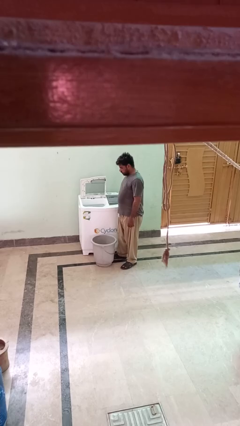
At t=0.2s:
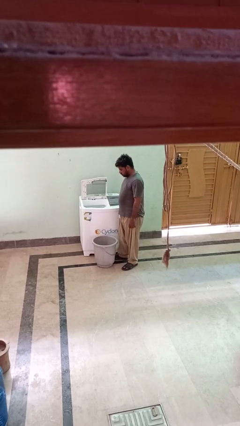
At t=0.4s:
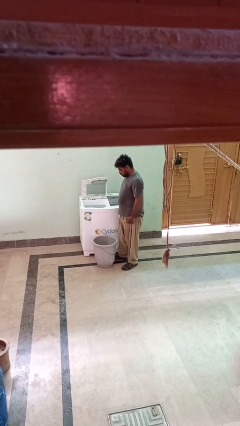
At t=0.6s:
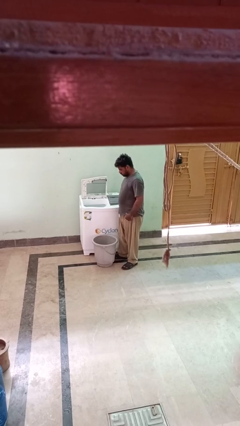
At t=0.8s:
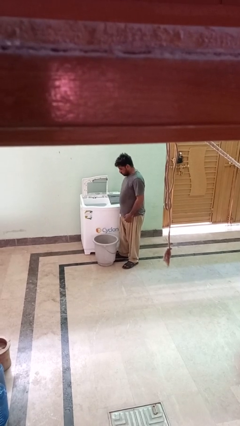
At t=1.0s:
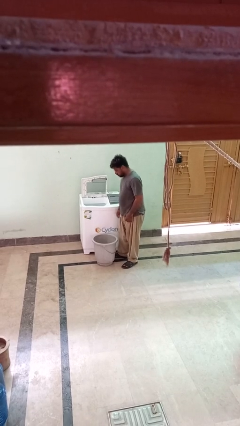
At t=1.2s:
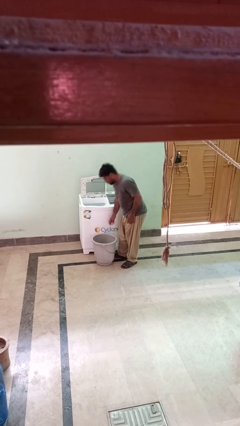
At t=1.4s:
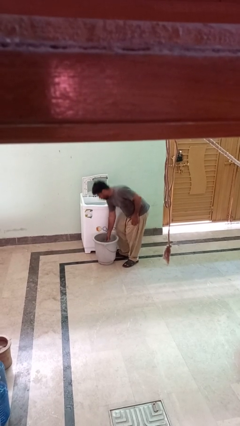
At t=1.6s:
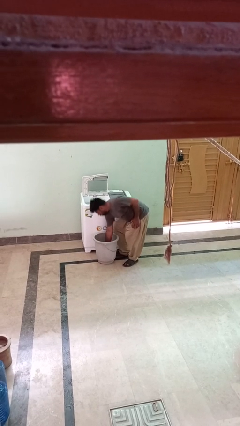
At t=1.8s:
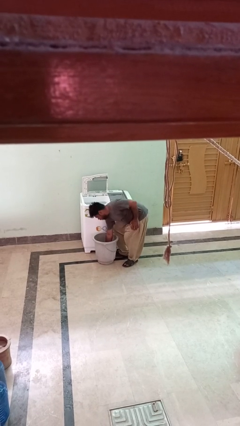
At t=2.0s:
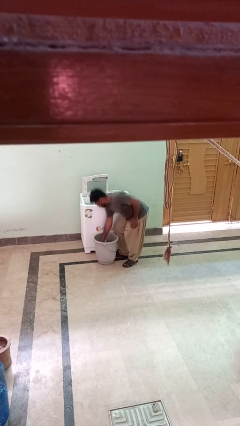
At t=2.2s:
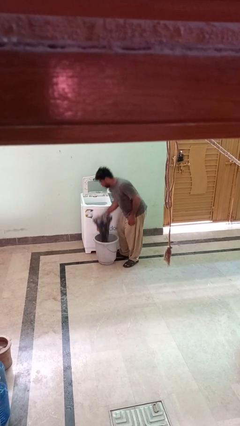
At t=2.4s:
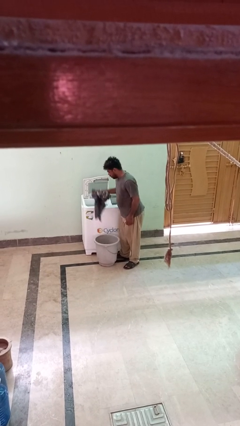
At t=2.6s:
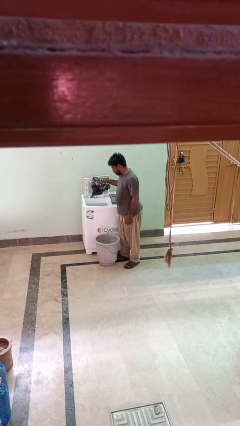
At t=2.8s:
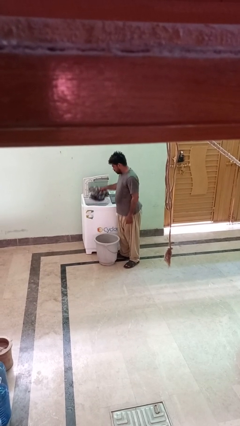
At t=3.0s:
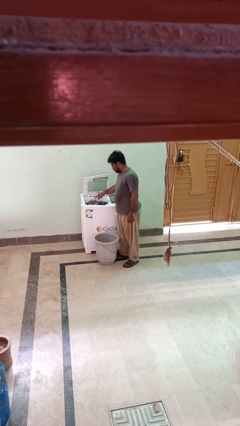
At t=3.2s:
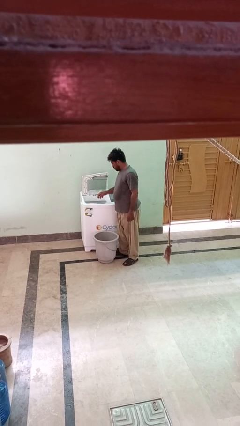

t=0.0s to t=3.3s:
person loads clotheswasher

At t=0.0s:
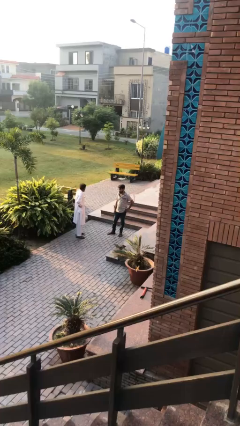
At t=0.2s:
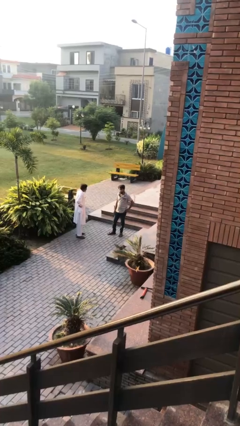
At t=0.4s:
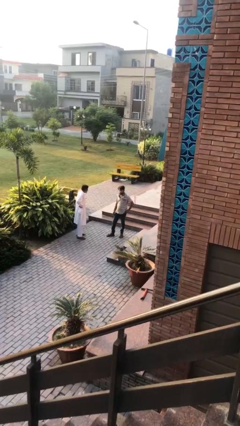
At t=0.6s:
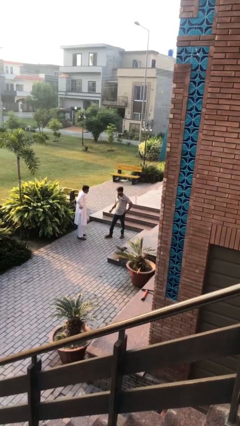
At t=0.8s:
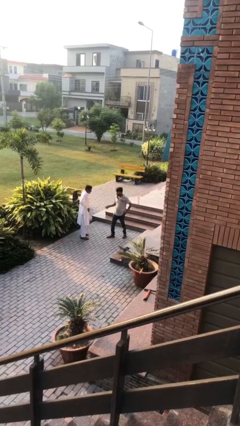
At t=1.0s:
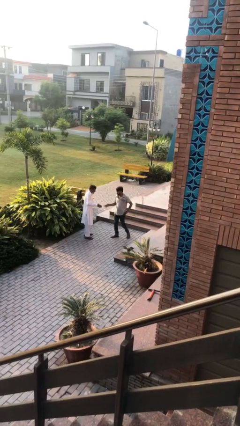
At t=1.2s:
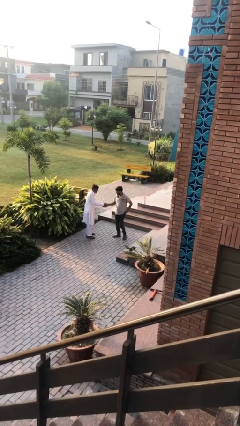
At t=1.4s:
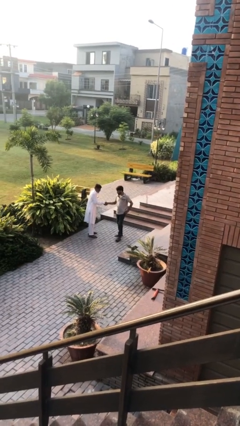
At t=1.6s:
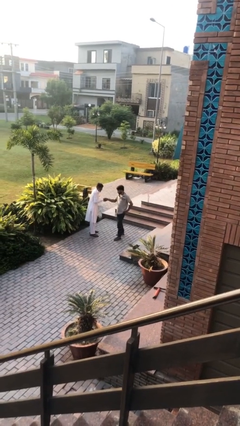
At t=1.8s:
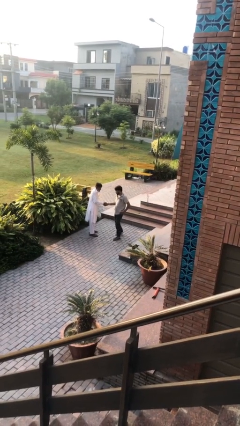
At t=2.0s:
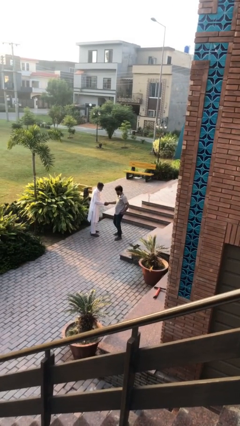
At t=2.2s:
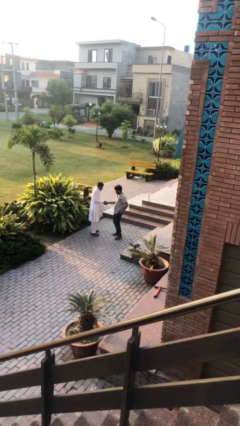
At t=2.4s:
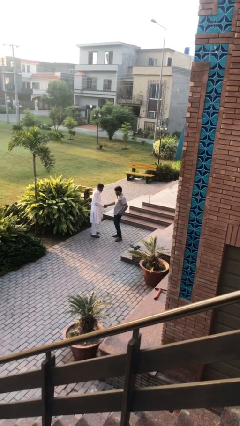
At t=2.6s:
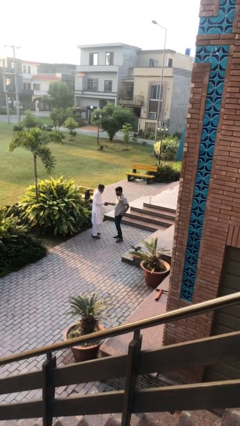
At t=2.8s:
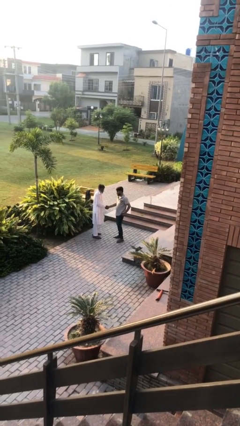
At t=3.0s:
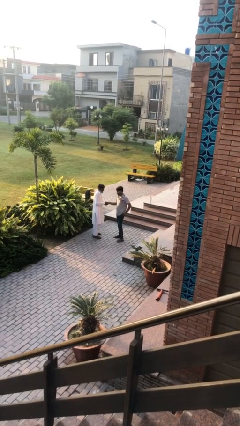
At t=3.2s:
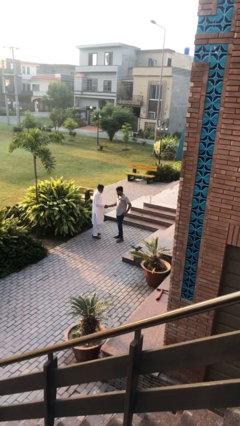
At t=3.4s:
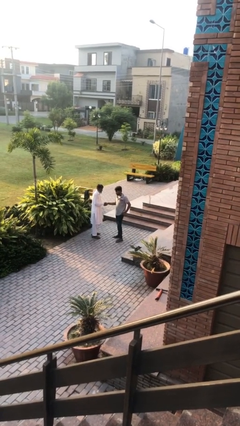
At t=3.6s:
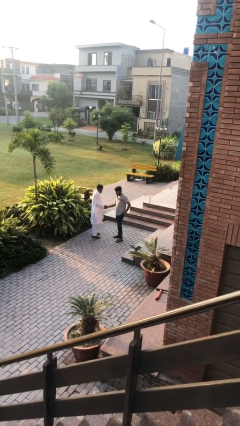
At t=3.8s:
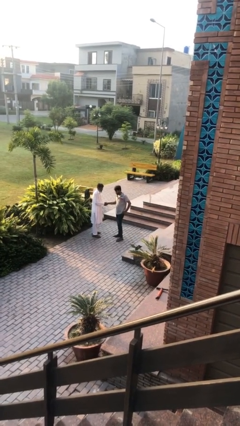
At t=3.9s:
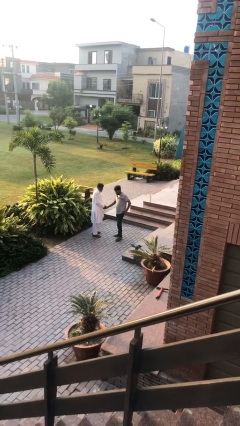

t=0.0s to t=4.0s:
person shakes hand

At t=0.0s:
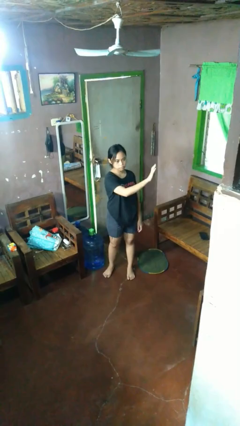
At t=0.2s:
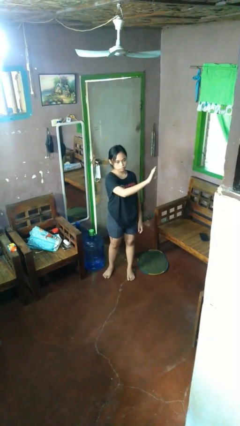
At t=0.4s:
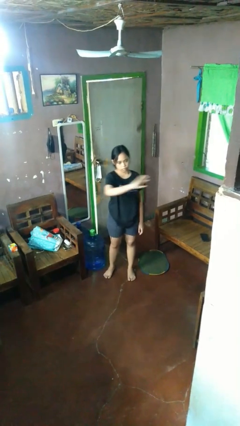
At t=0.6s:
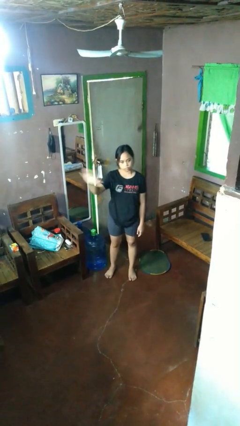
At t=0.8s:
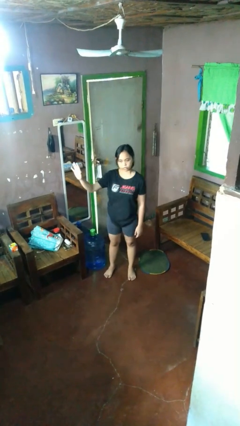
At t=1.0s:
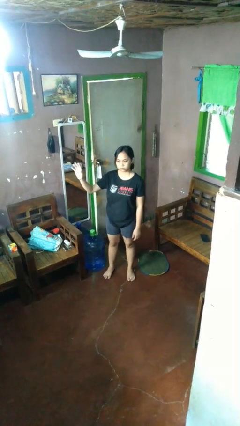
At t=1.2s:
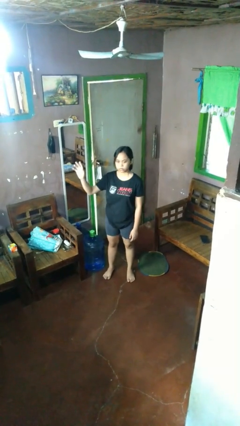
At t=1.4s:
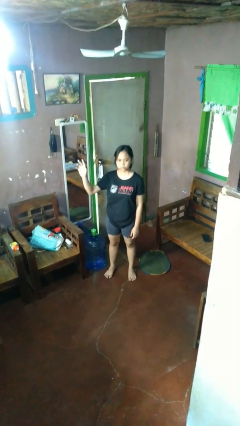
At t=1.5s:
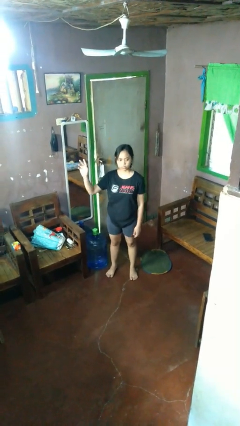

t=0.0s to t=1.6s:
person gestures swipe right

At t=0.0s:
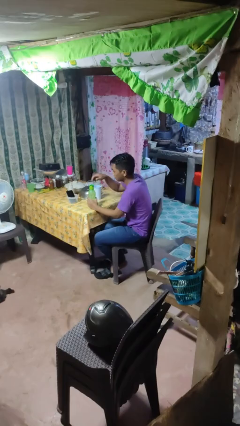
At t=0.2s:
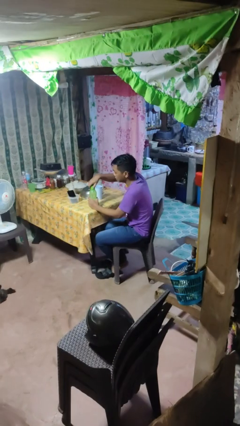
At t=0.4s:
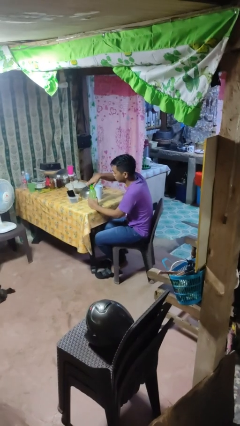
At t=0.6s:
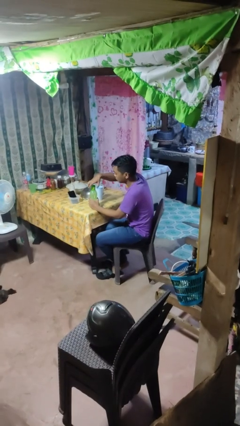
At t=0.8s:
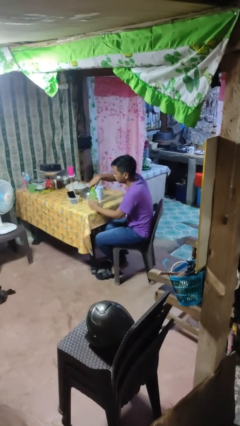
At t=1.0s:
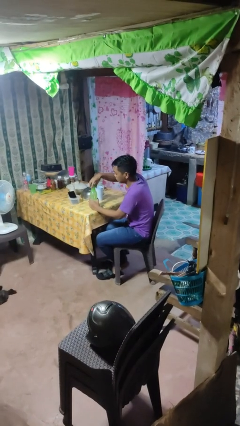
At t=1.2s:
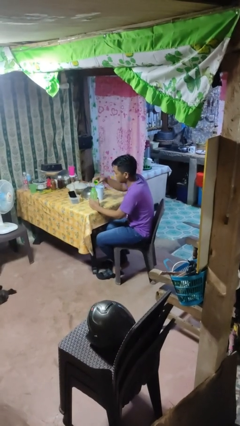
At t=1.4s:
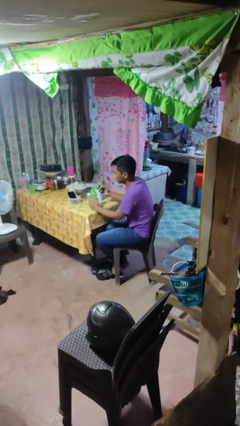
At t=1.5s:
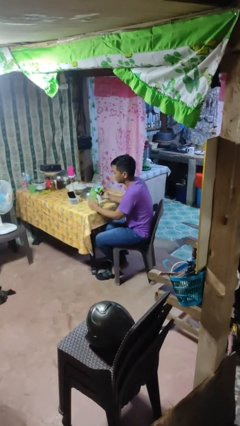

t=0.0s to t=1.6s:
person unscrews lid from bottle

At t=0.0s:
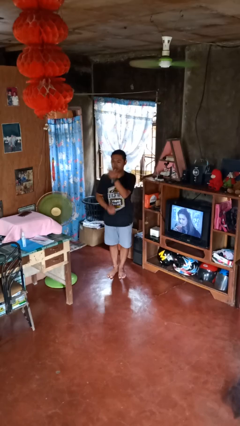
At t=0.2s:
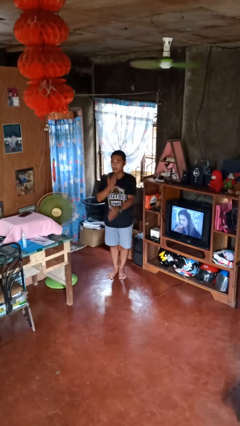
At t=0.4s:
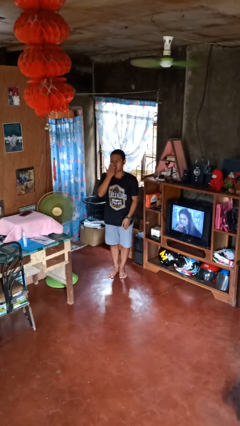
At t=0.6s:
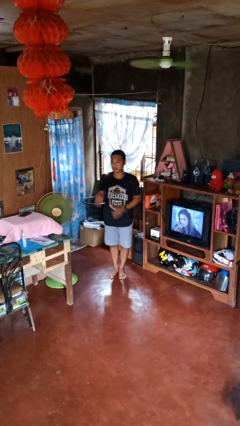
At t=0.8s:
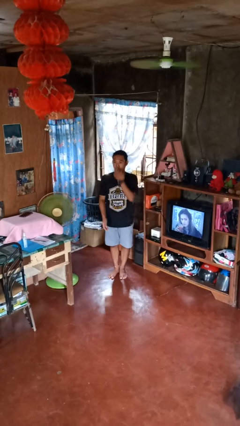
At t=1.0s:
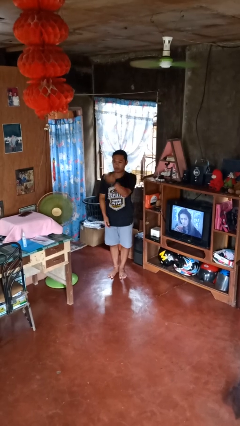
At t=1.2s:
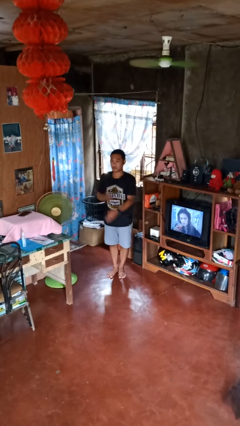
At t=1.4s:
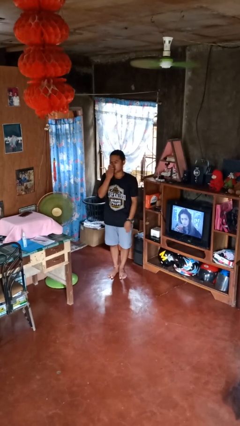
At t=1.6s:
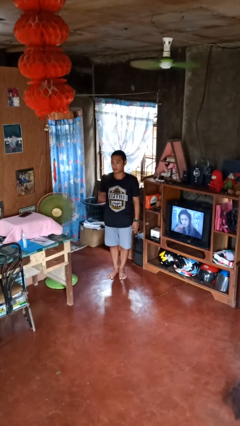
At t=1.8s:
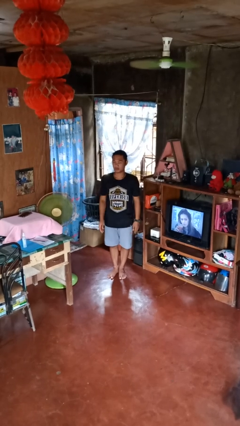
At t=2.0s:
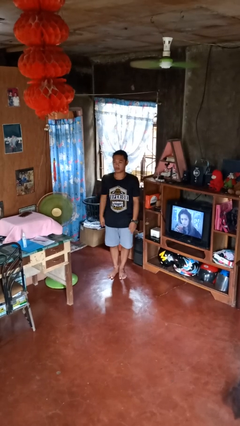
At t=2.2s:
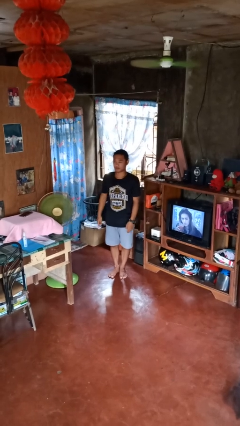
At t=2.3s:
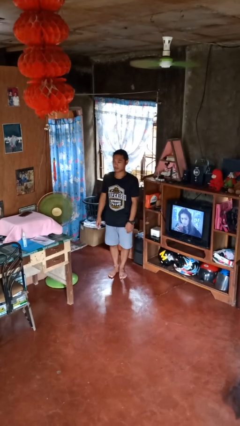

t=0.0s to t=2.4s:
person gestures blow kiss

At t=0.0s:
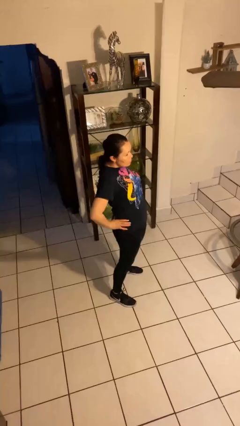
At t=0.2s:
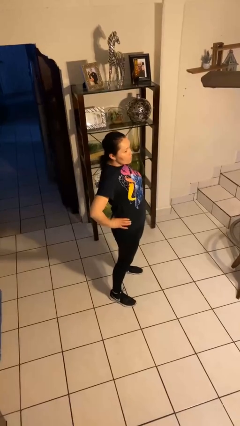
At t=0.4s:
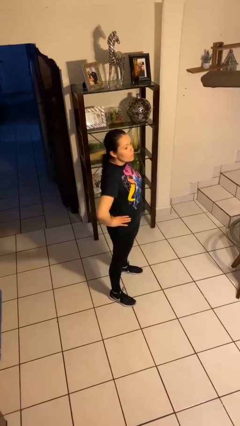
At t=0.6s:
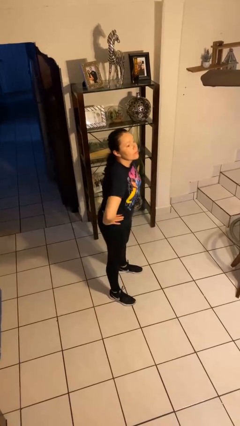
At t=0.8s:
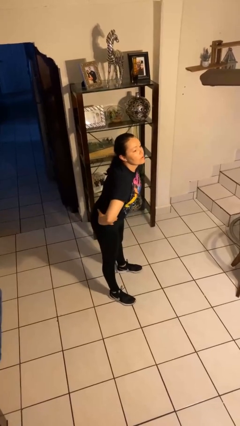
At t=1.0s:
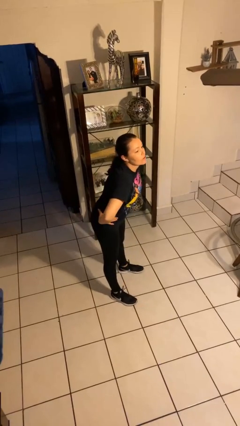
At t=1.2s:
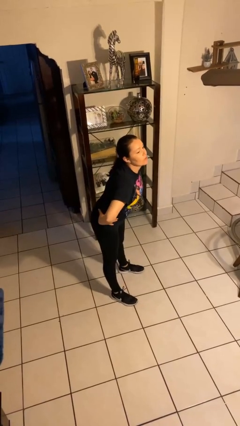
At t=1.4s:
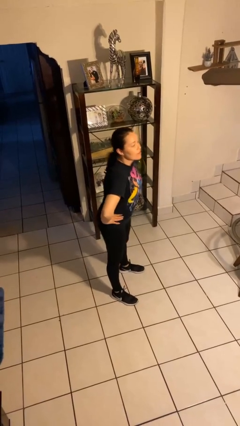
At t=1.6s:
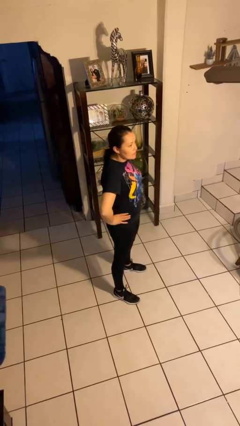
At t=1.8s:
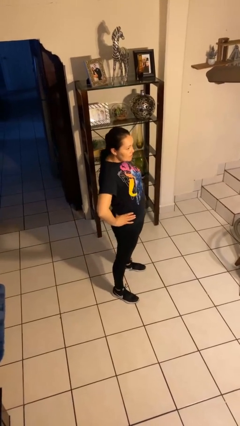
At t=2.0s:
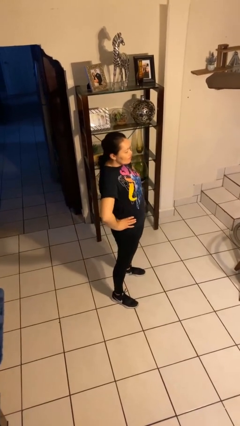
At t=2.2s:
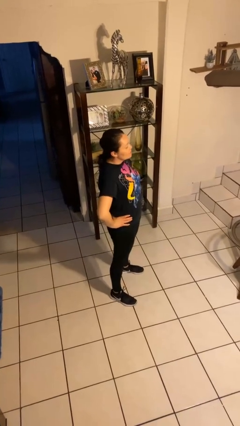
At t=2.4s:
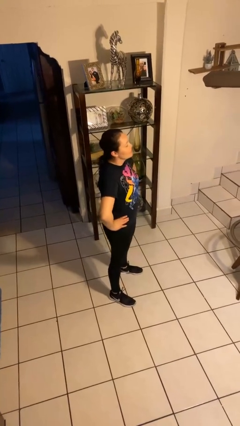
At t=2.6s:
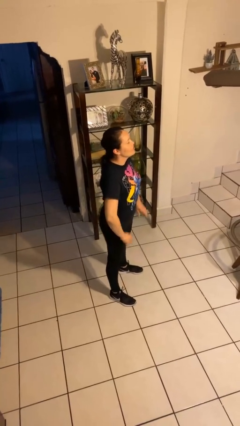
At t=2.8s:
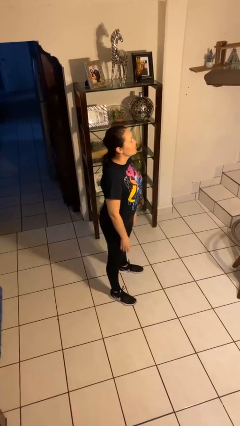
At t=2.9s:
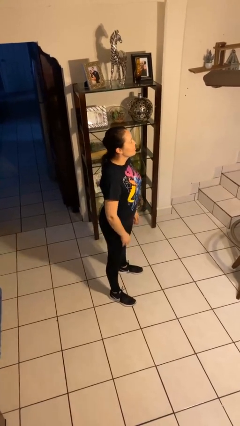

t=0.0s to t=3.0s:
person wiggles hips

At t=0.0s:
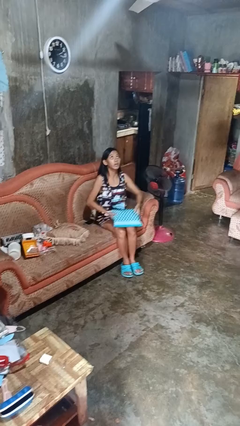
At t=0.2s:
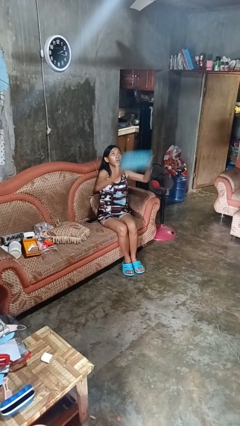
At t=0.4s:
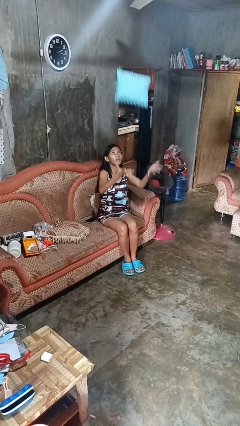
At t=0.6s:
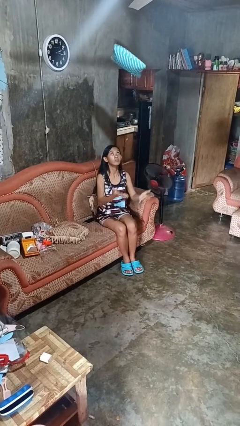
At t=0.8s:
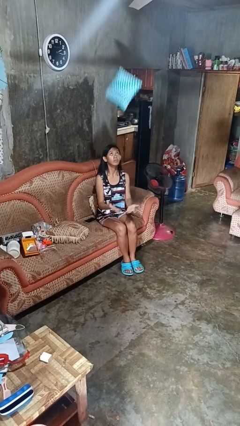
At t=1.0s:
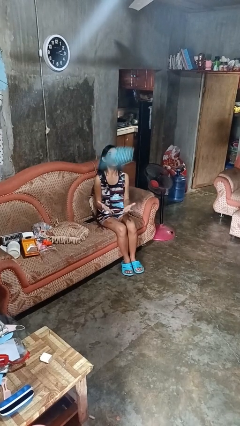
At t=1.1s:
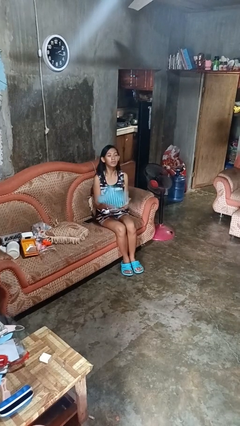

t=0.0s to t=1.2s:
person drops object
